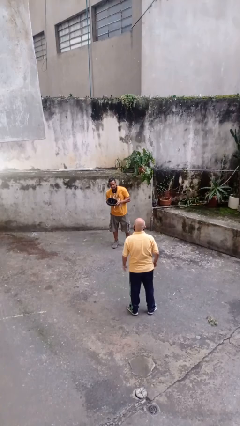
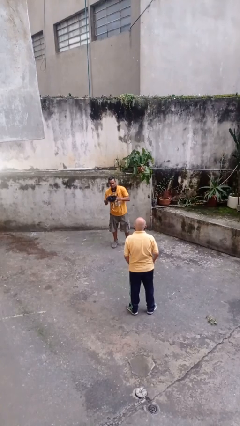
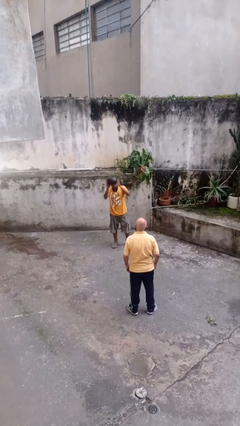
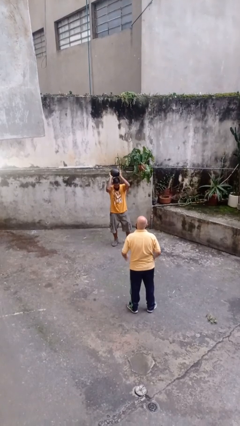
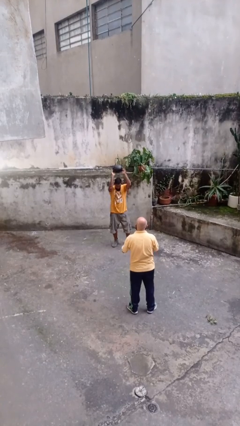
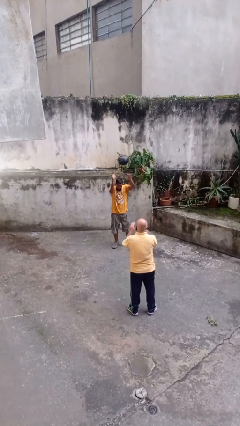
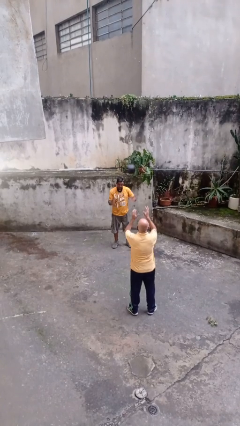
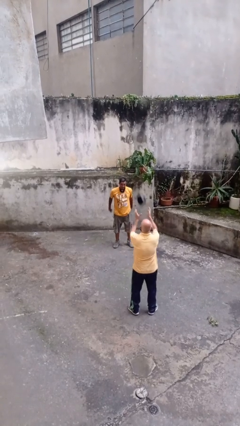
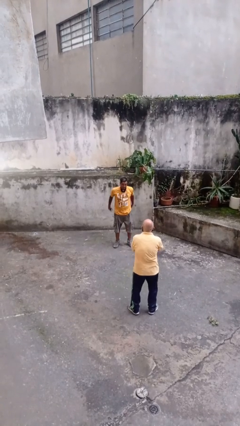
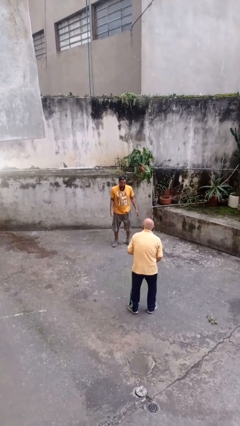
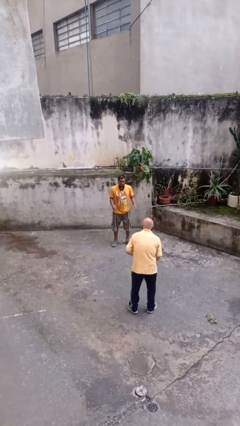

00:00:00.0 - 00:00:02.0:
person throws object to person

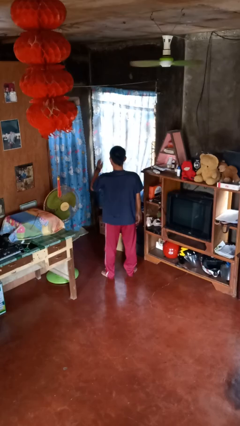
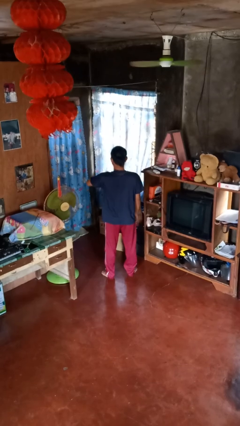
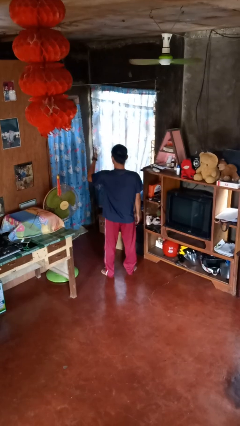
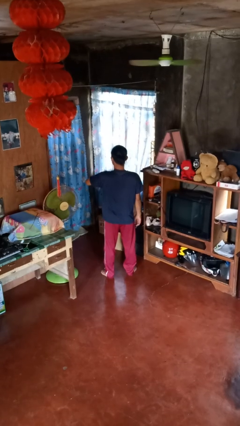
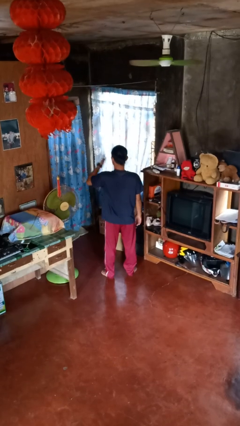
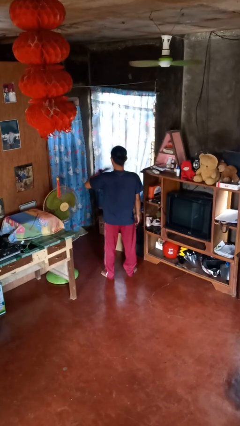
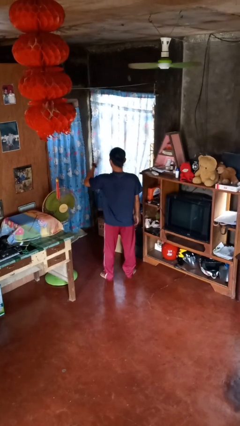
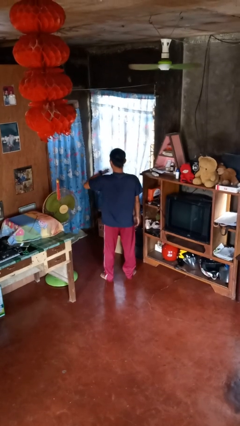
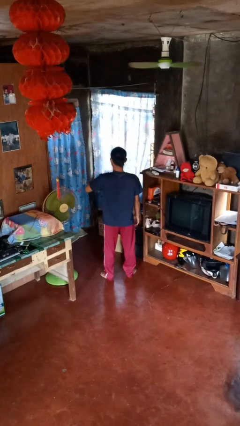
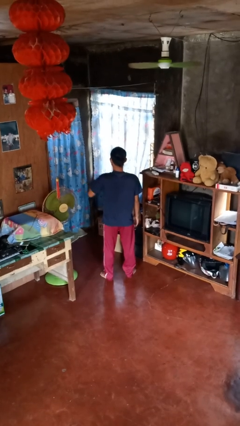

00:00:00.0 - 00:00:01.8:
person drums on chest

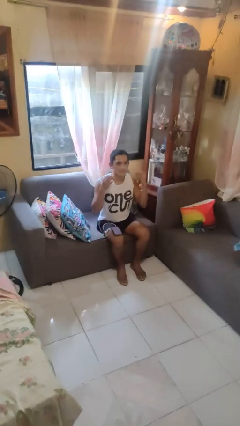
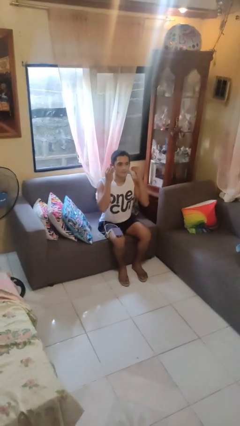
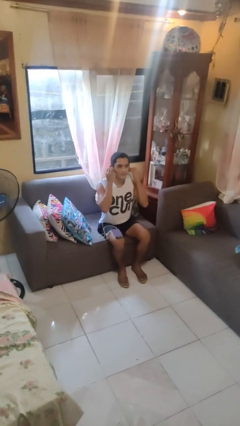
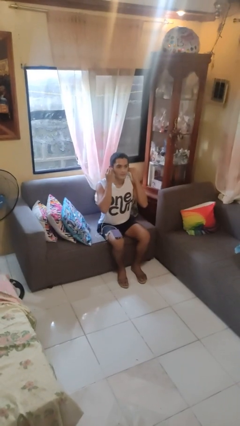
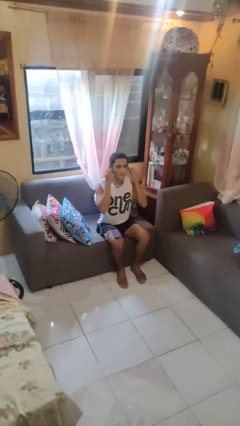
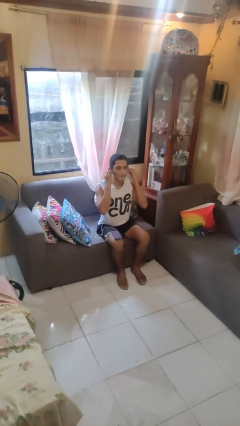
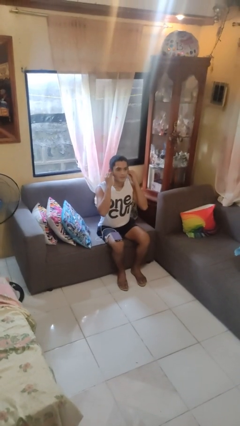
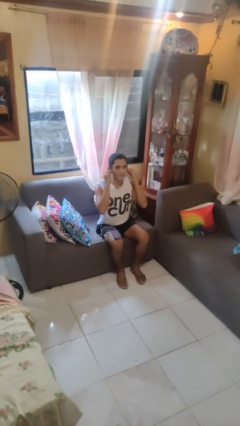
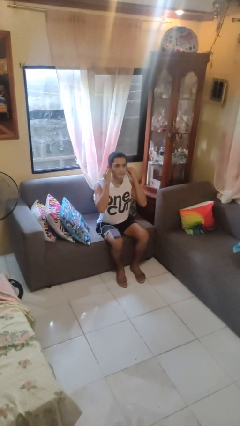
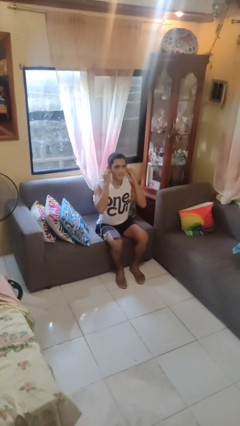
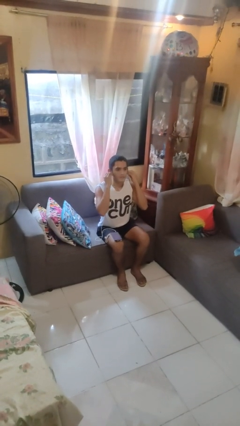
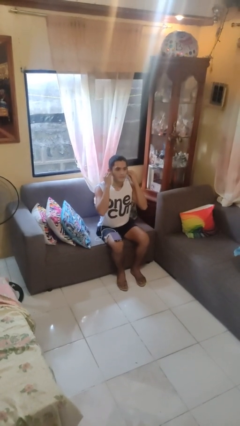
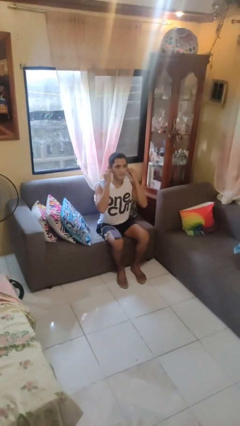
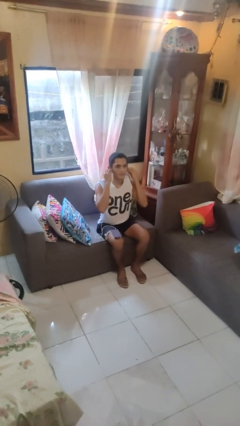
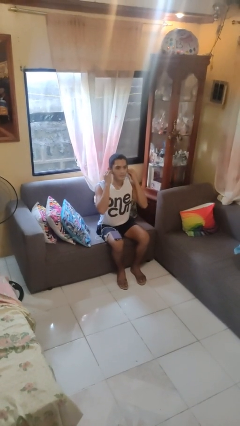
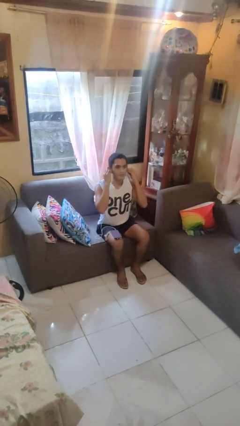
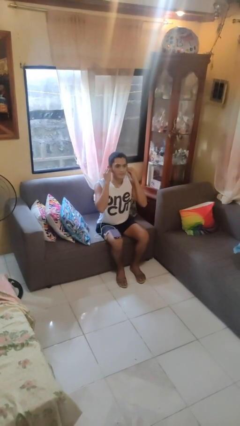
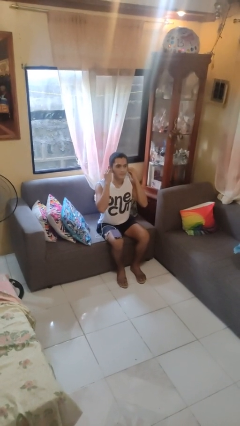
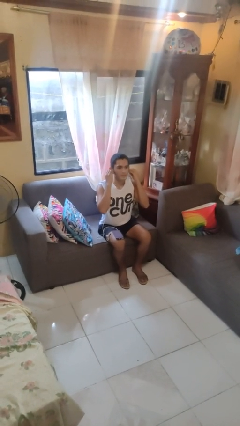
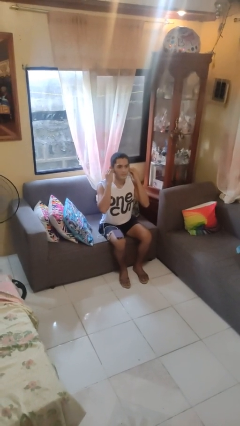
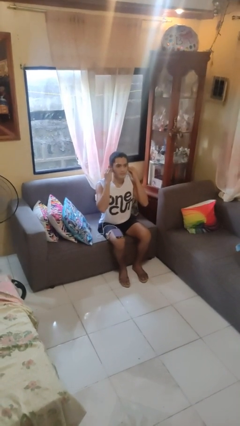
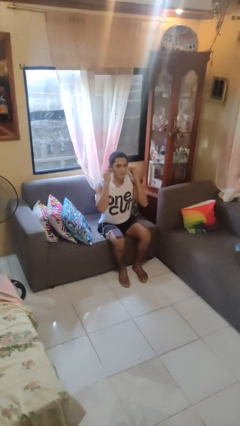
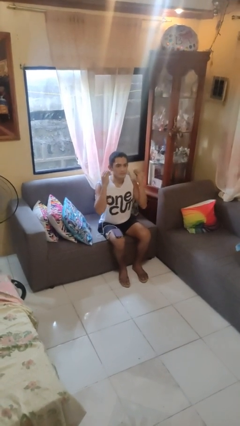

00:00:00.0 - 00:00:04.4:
person puts on headphones

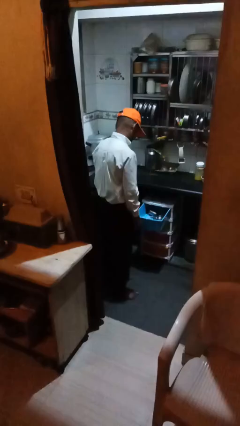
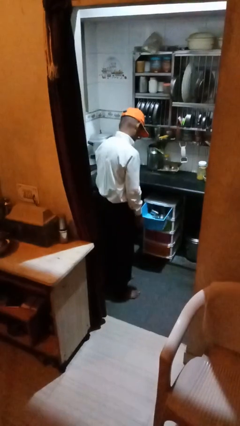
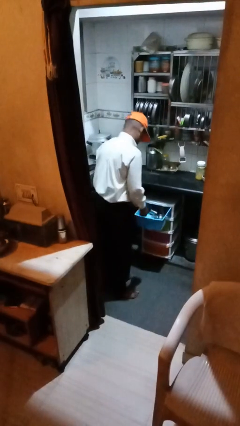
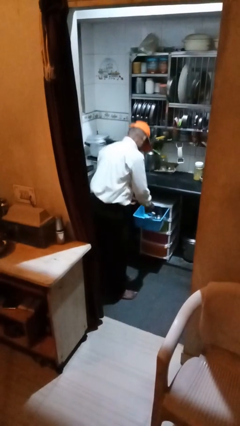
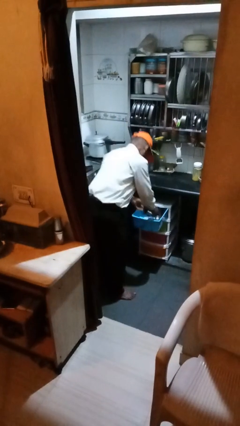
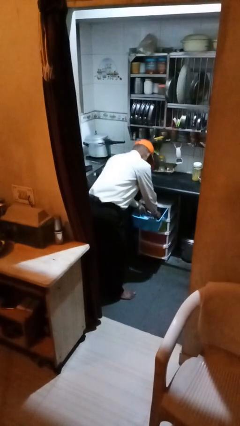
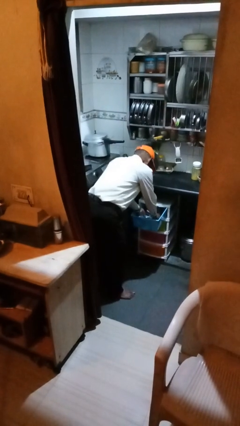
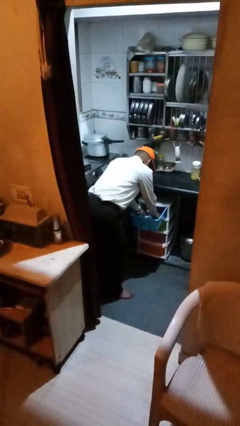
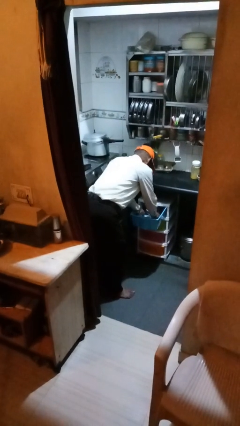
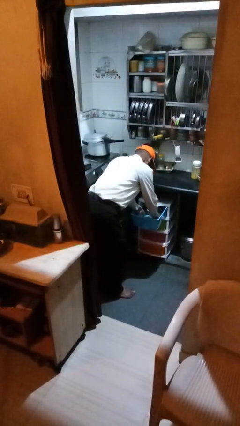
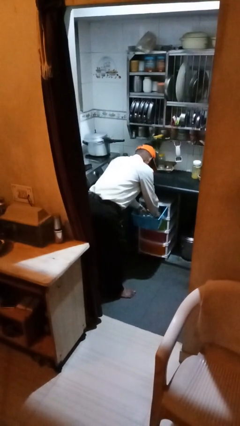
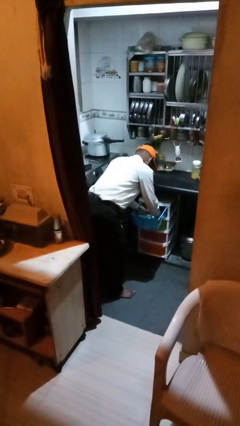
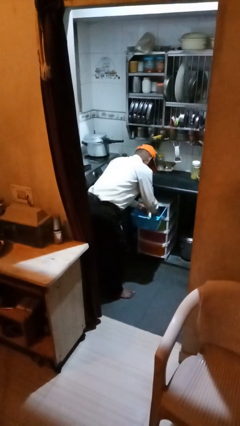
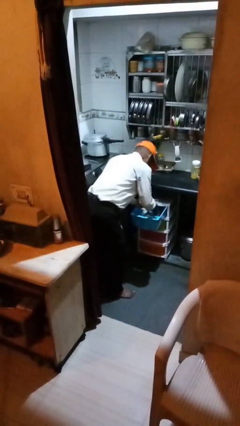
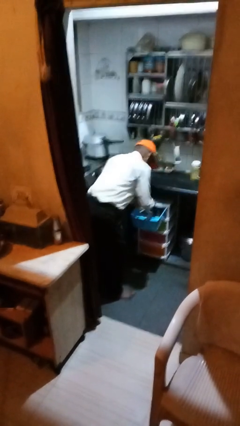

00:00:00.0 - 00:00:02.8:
person takes object from kitchen drawer

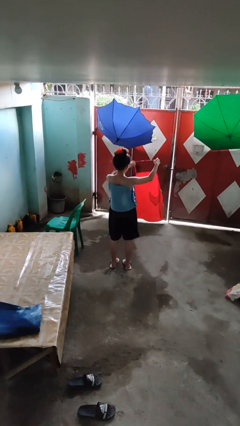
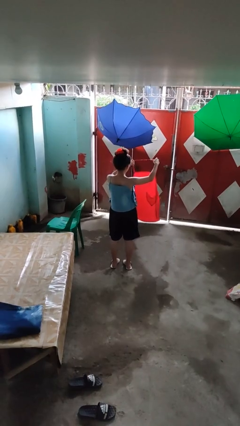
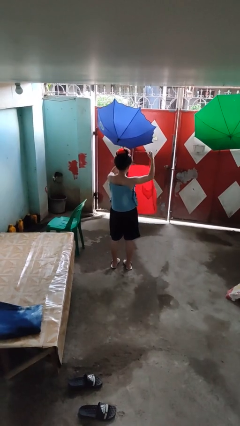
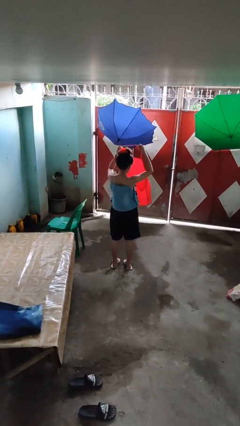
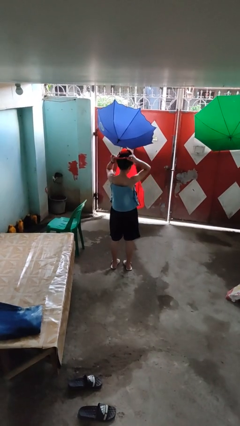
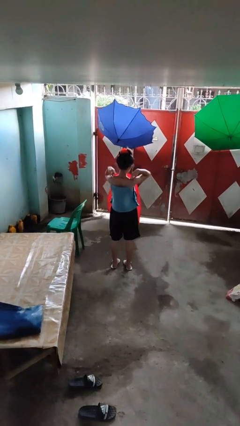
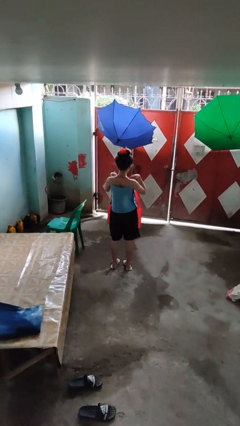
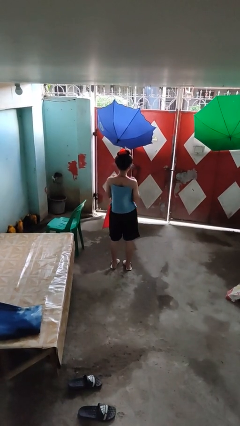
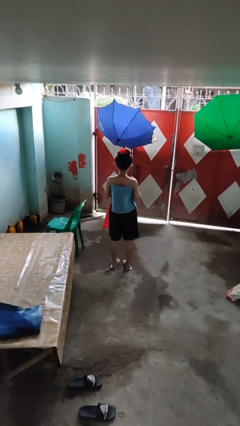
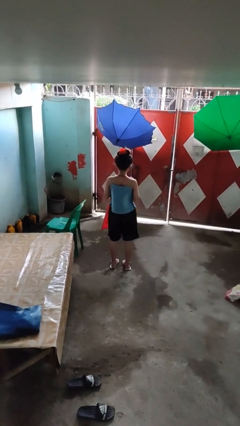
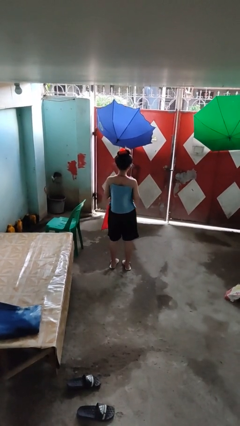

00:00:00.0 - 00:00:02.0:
person puts on apron

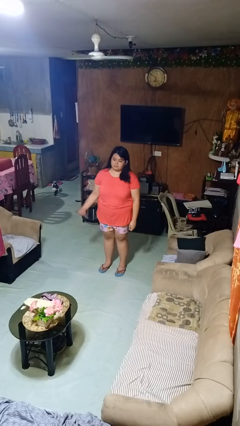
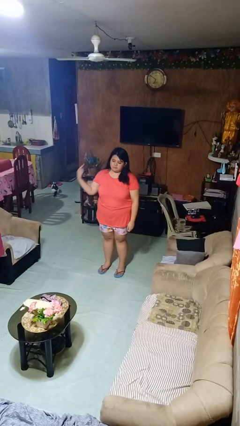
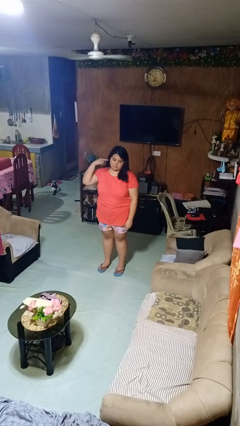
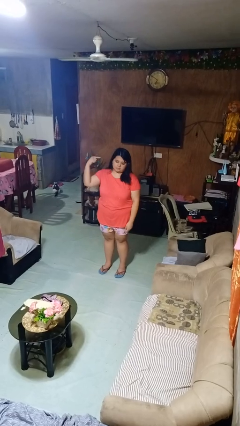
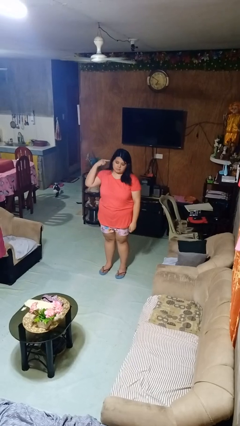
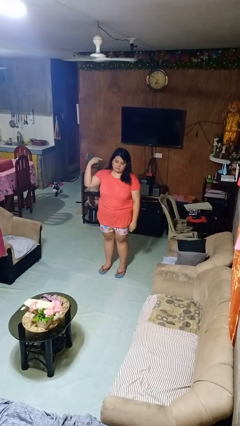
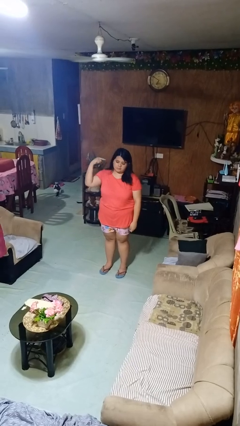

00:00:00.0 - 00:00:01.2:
person gestures listen closely

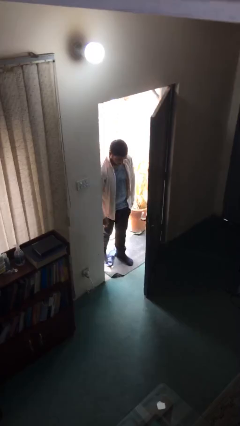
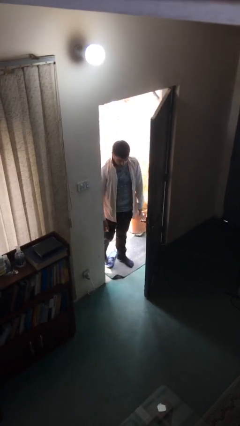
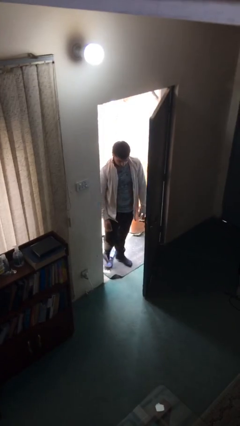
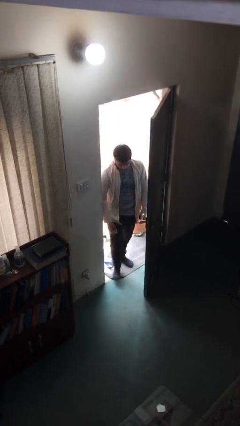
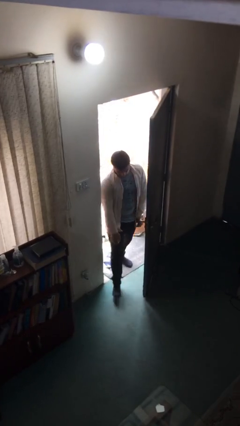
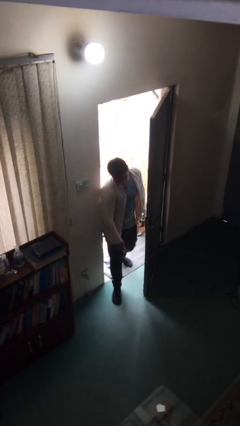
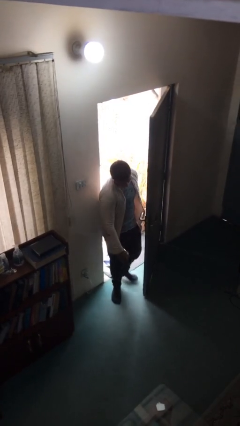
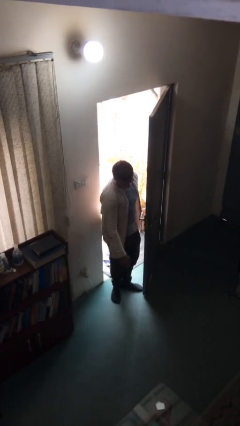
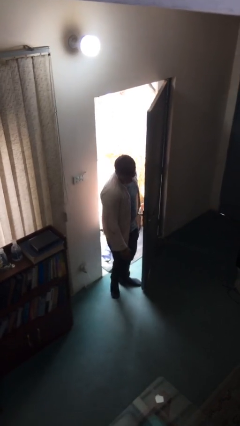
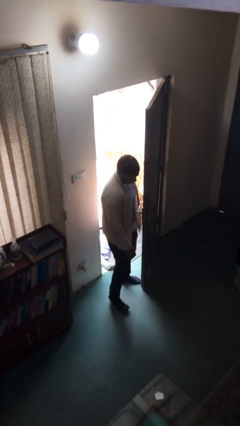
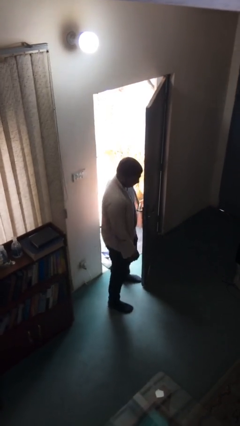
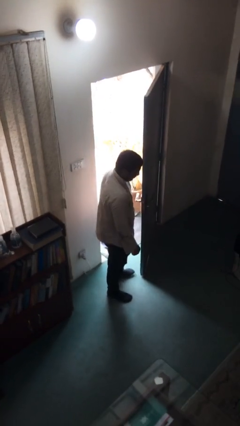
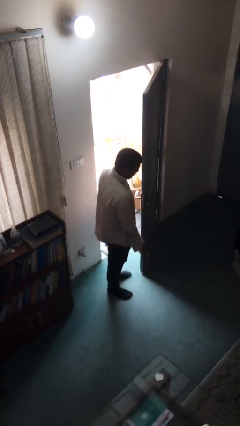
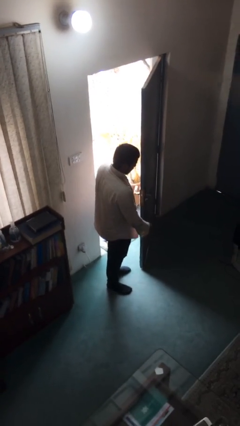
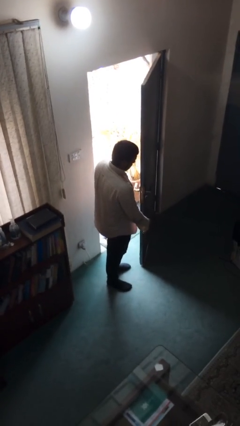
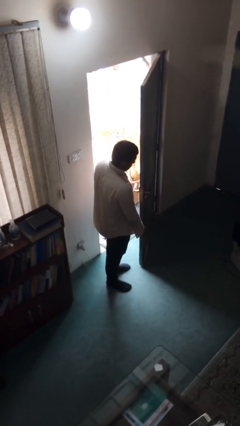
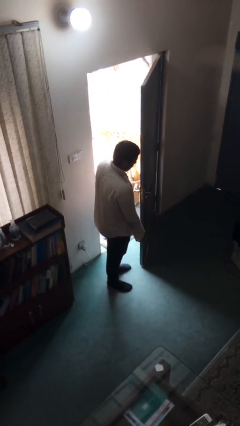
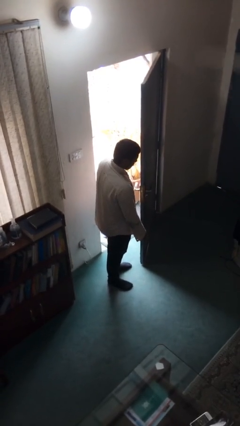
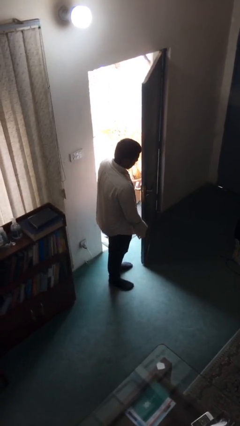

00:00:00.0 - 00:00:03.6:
person enters scene through structure
